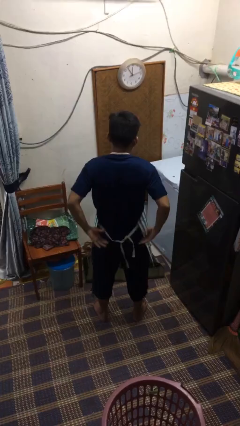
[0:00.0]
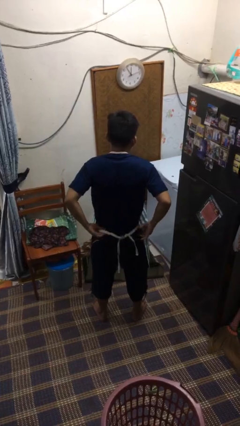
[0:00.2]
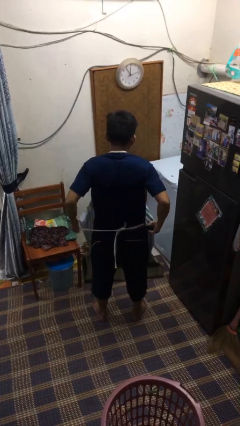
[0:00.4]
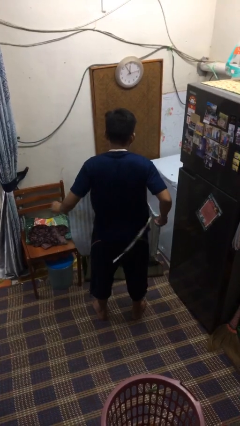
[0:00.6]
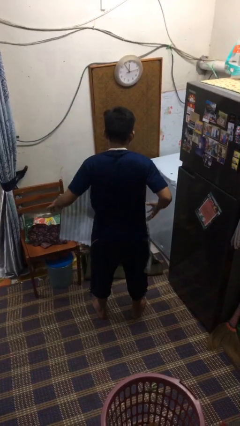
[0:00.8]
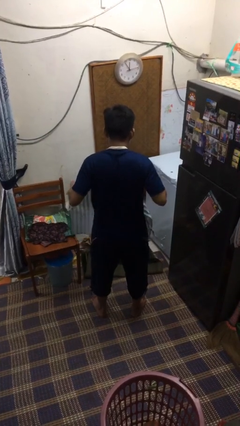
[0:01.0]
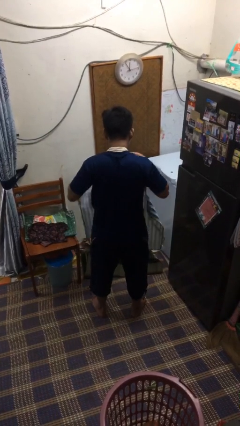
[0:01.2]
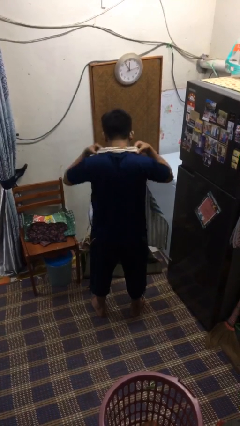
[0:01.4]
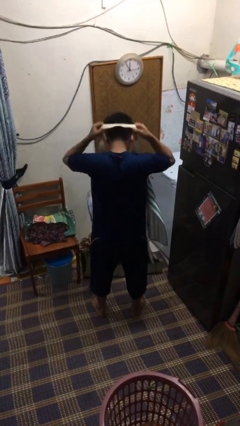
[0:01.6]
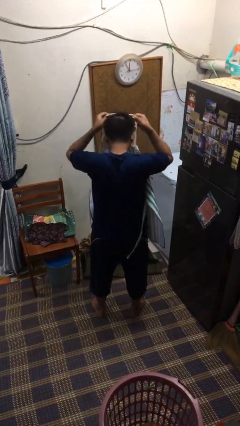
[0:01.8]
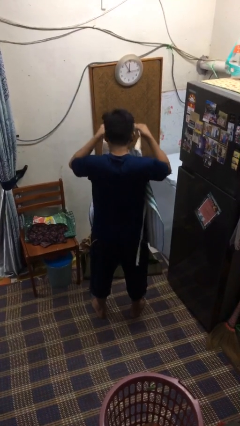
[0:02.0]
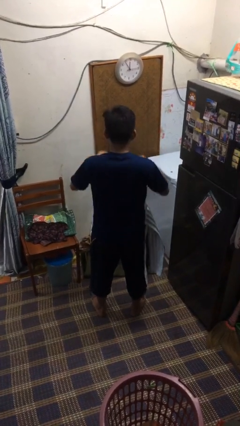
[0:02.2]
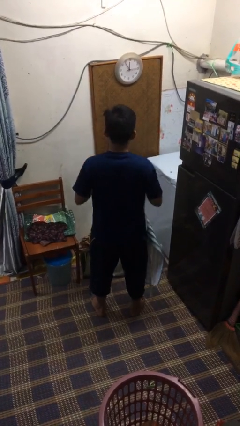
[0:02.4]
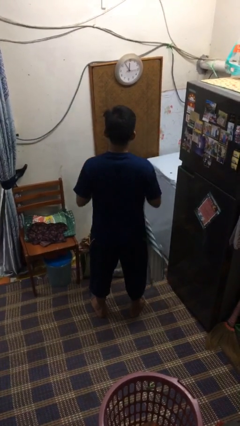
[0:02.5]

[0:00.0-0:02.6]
person takes off apron

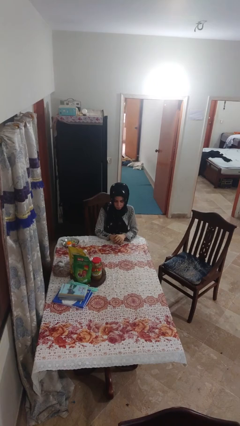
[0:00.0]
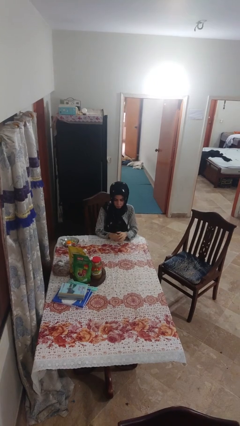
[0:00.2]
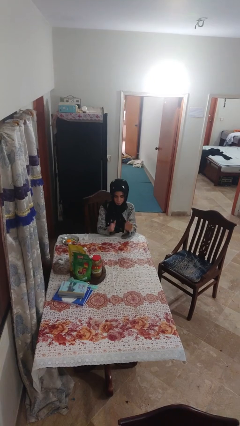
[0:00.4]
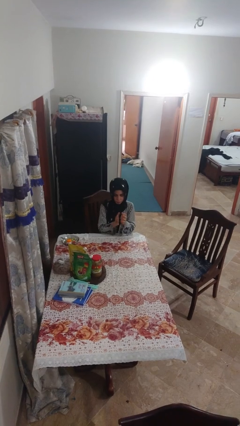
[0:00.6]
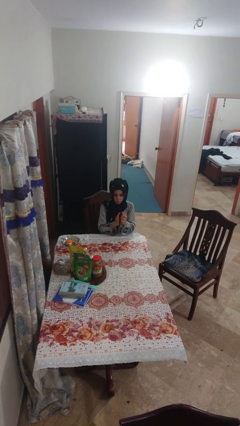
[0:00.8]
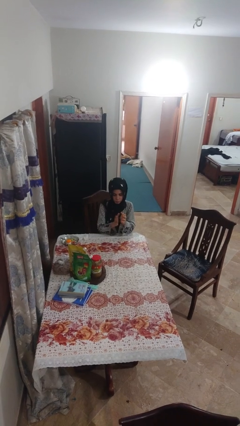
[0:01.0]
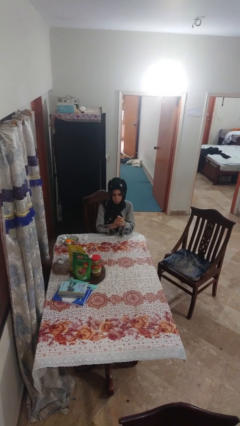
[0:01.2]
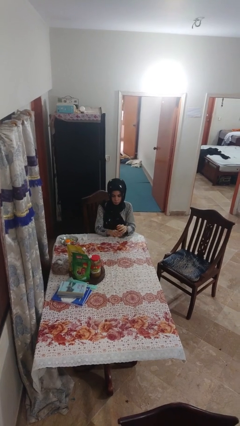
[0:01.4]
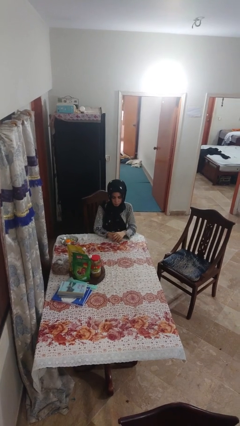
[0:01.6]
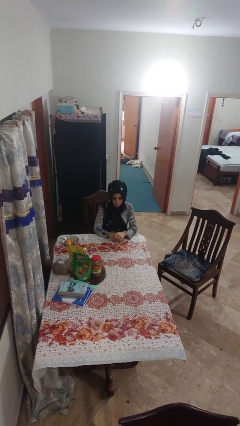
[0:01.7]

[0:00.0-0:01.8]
person claps hands

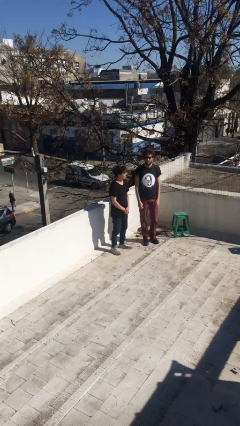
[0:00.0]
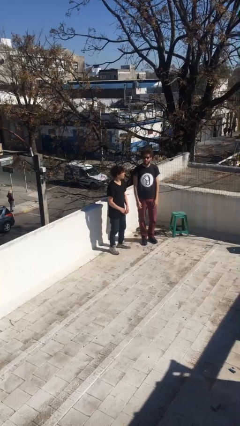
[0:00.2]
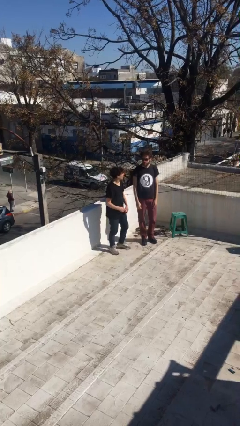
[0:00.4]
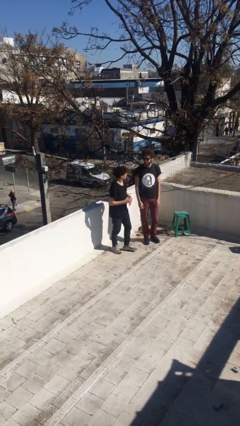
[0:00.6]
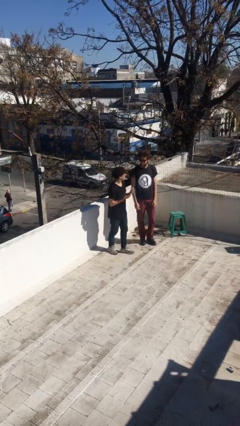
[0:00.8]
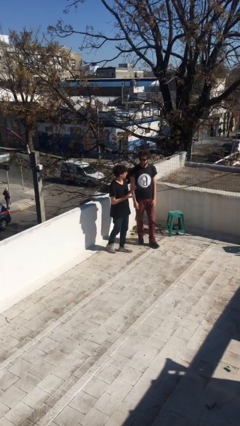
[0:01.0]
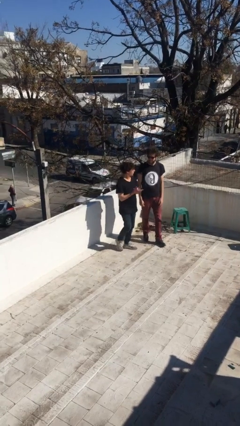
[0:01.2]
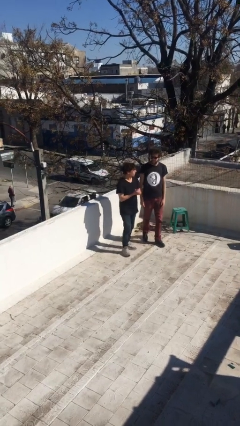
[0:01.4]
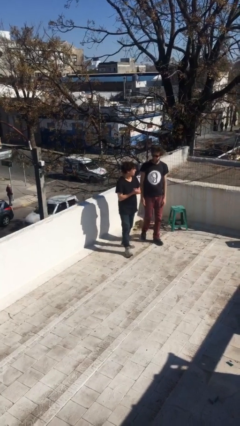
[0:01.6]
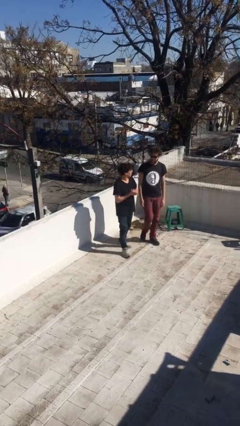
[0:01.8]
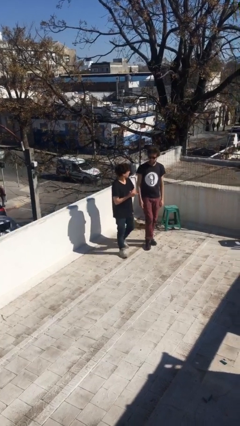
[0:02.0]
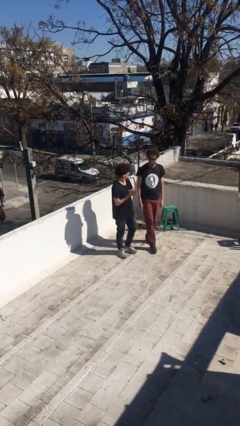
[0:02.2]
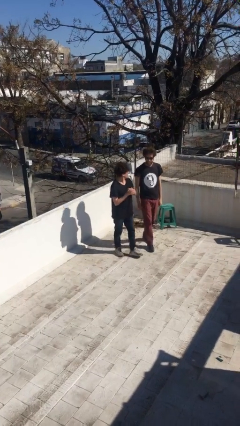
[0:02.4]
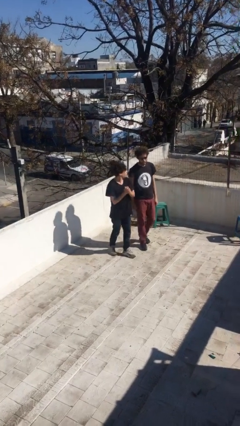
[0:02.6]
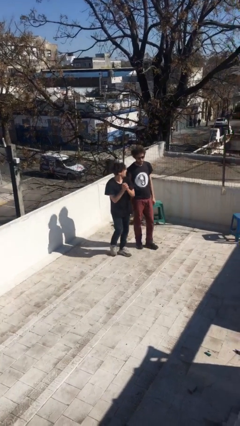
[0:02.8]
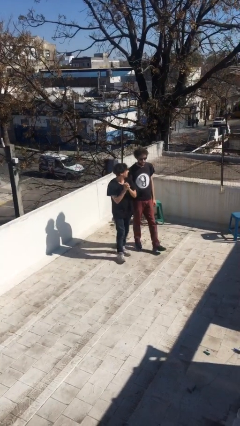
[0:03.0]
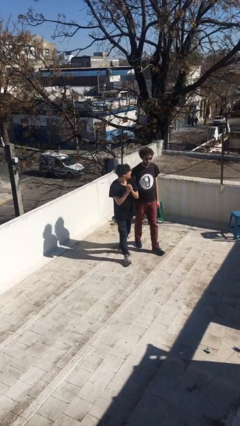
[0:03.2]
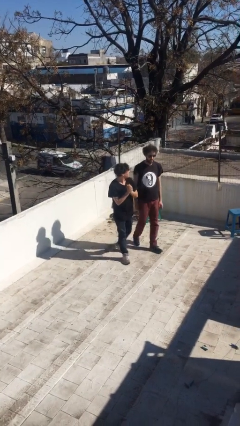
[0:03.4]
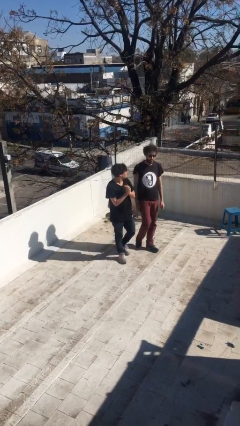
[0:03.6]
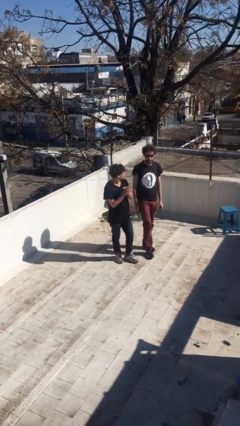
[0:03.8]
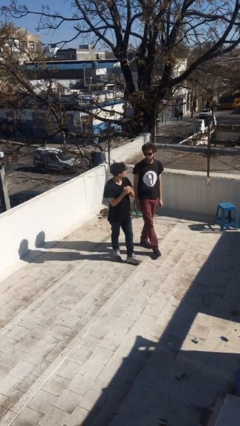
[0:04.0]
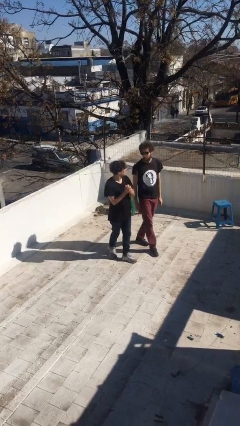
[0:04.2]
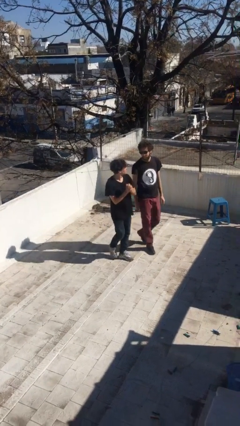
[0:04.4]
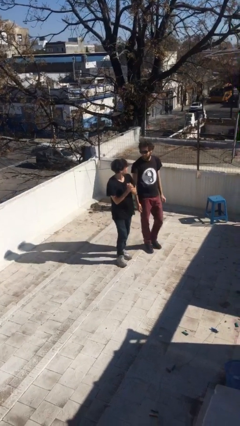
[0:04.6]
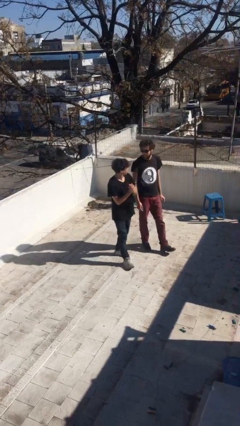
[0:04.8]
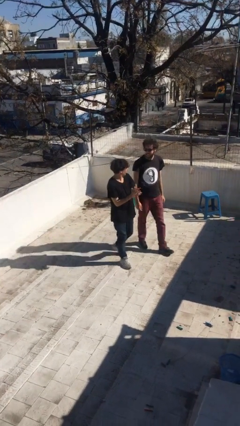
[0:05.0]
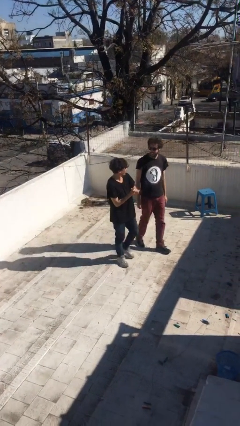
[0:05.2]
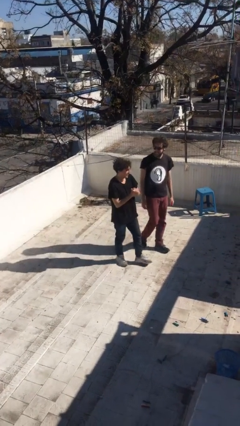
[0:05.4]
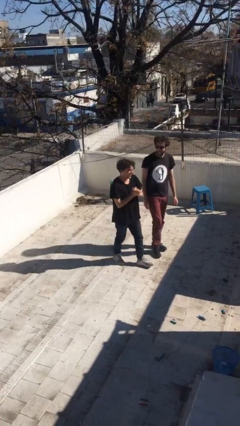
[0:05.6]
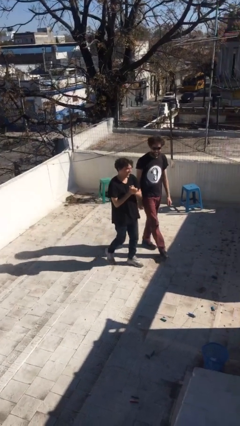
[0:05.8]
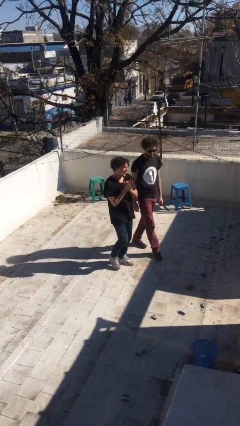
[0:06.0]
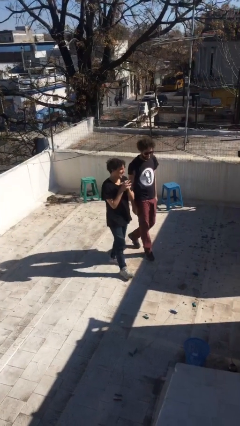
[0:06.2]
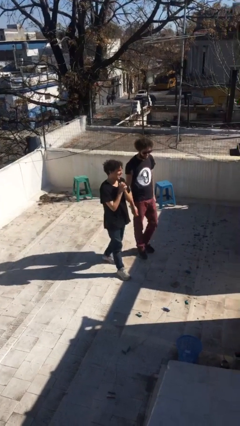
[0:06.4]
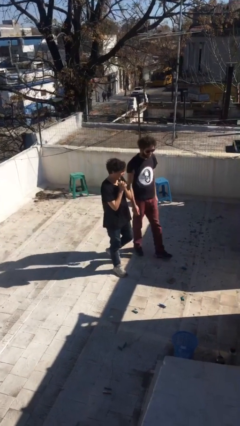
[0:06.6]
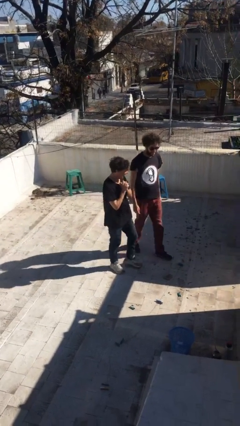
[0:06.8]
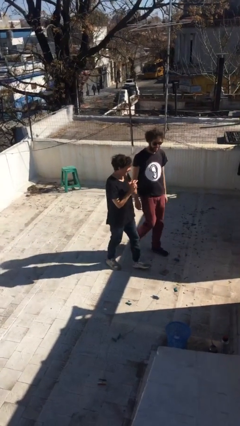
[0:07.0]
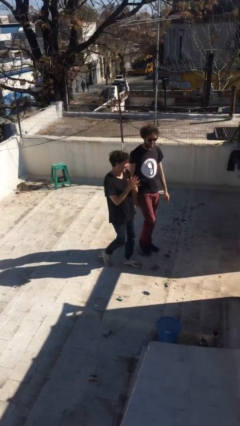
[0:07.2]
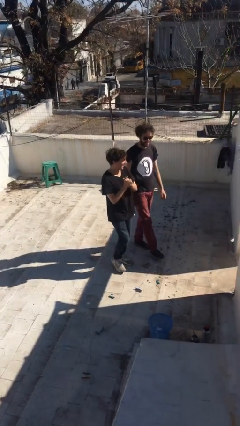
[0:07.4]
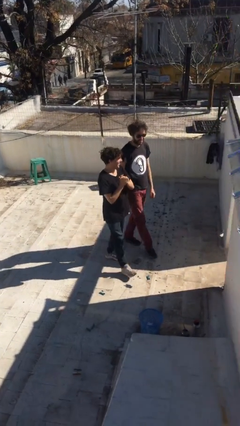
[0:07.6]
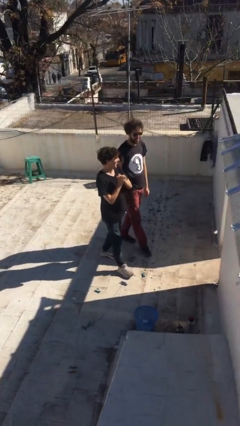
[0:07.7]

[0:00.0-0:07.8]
person talks to person

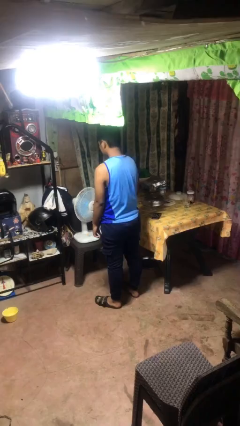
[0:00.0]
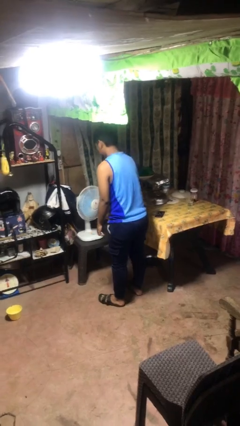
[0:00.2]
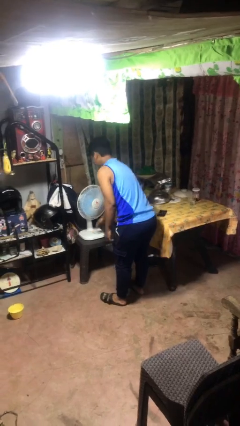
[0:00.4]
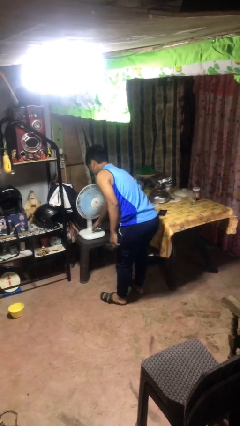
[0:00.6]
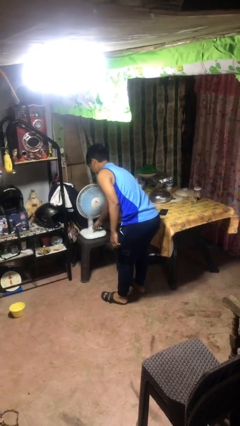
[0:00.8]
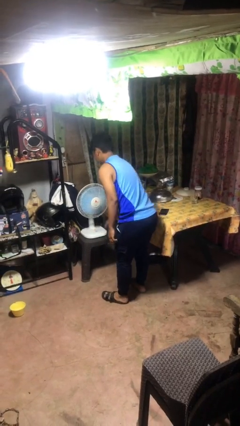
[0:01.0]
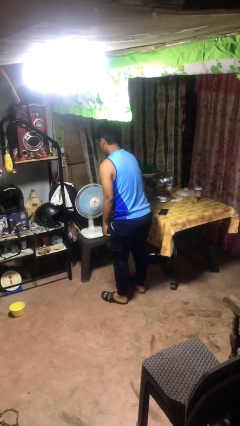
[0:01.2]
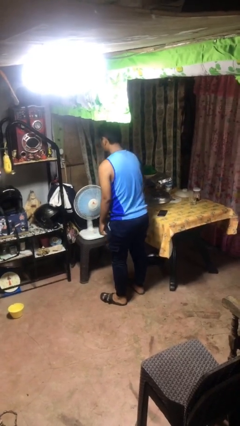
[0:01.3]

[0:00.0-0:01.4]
person turns off fan

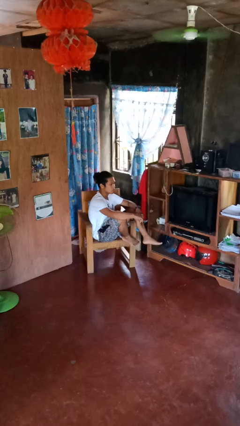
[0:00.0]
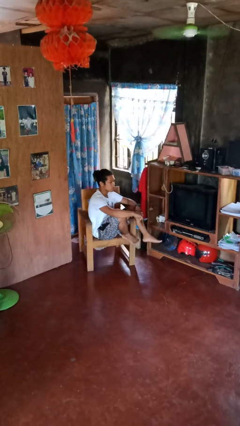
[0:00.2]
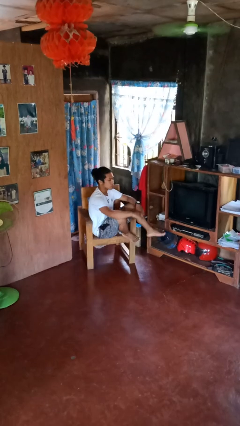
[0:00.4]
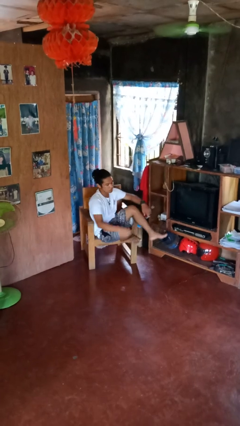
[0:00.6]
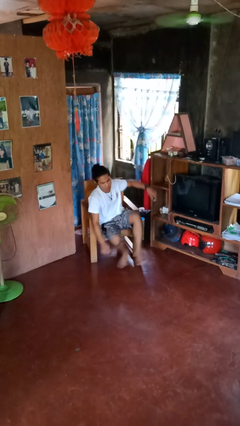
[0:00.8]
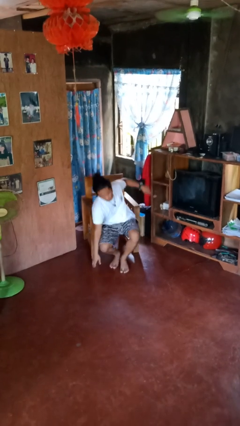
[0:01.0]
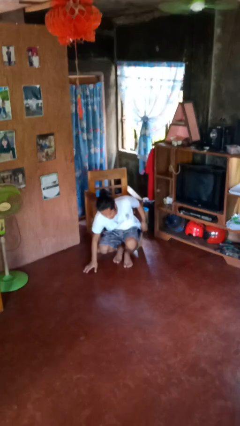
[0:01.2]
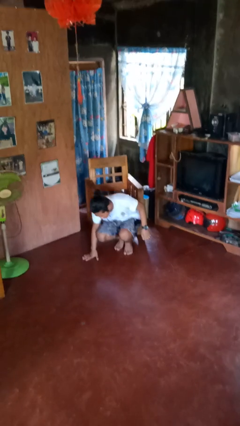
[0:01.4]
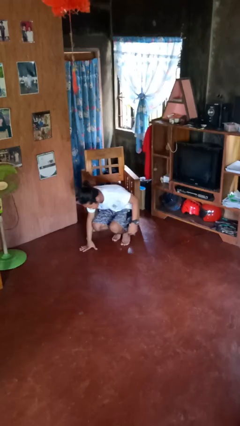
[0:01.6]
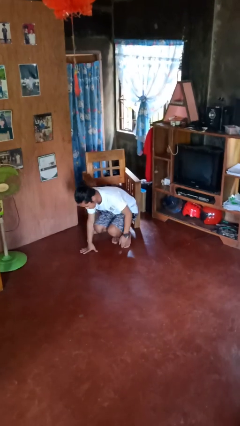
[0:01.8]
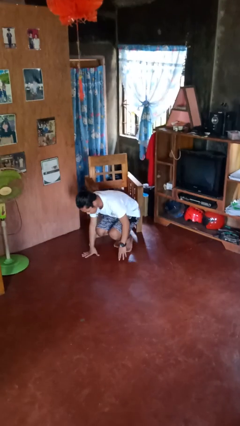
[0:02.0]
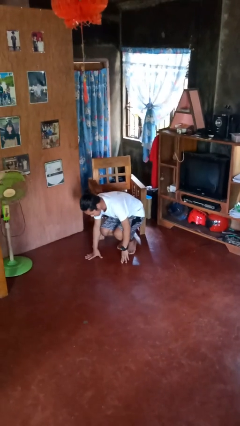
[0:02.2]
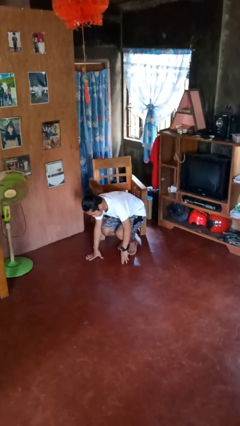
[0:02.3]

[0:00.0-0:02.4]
person falls from chair

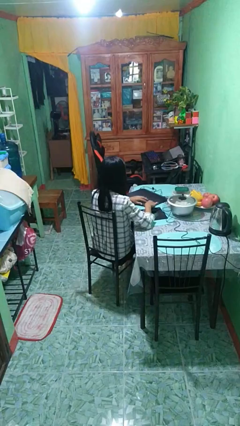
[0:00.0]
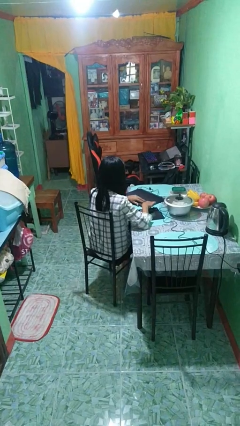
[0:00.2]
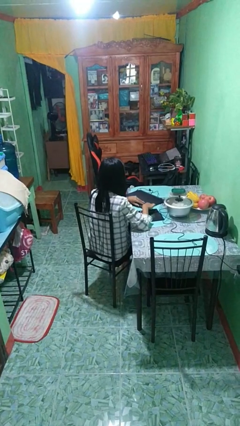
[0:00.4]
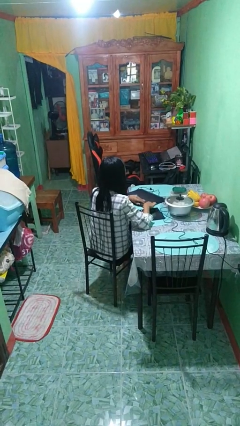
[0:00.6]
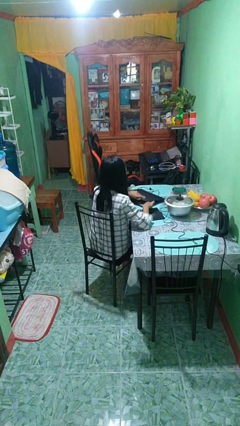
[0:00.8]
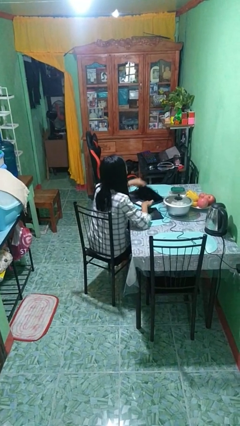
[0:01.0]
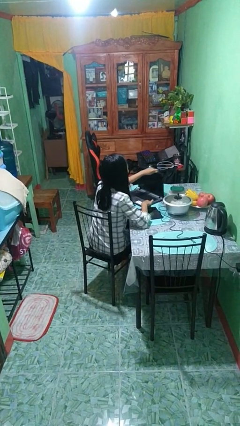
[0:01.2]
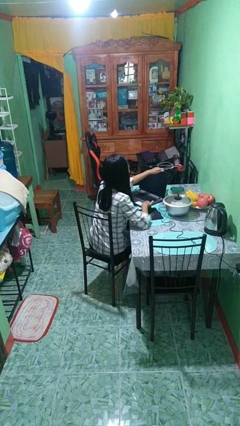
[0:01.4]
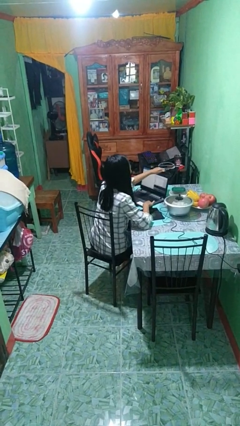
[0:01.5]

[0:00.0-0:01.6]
person opens laptop
